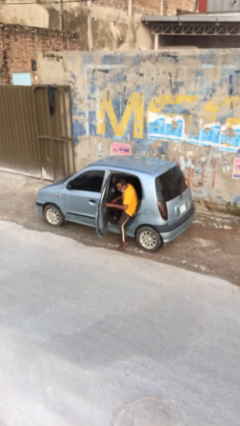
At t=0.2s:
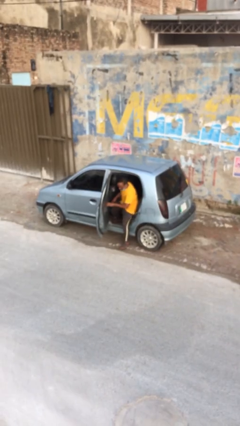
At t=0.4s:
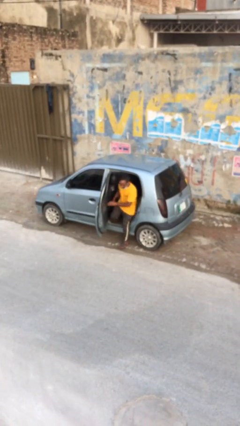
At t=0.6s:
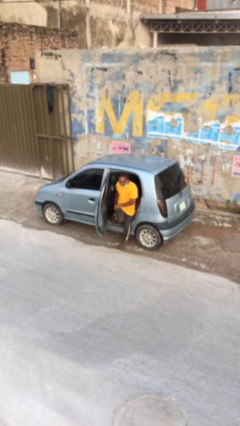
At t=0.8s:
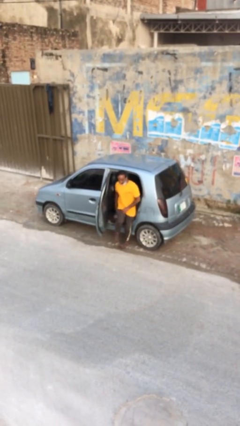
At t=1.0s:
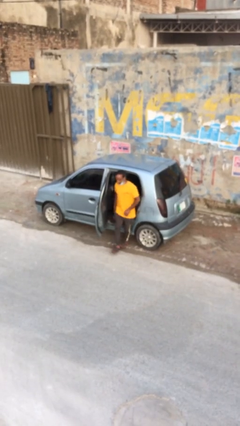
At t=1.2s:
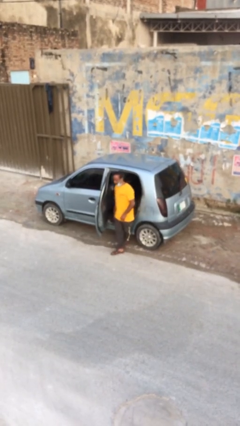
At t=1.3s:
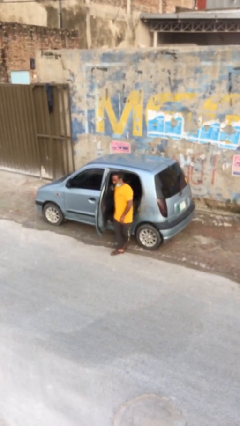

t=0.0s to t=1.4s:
person exits car

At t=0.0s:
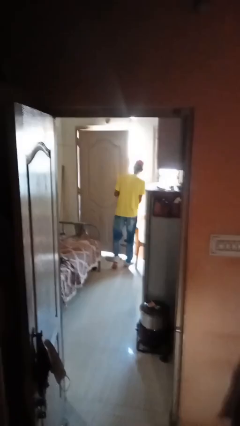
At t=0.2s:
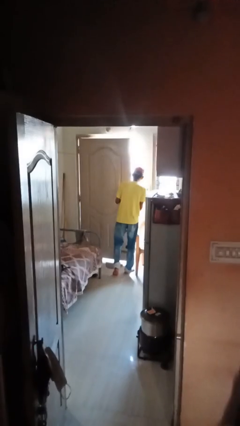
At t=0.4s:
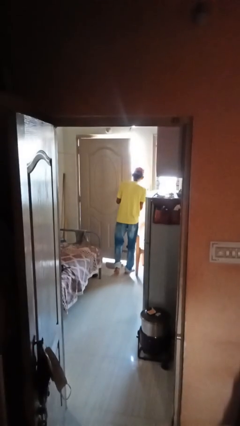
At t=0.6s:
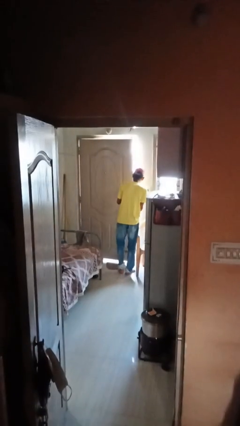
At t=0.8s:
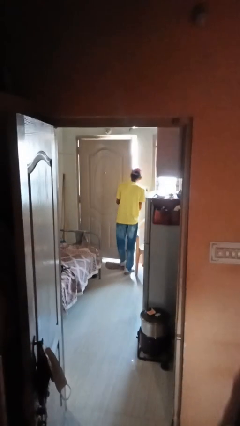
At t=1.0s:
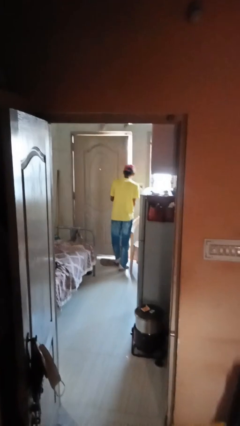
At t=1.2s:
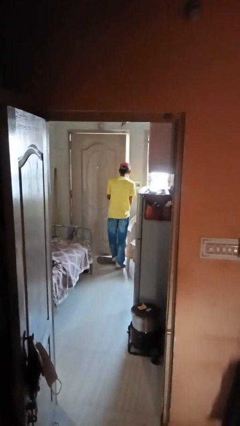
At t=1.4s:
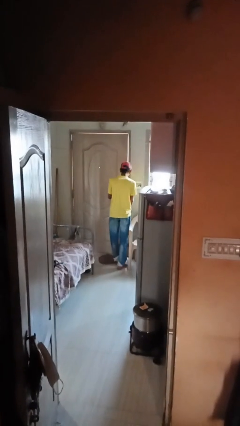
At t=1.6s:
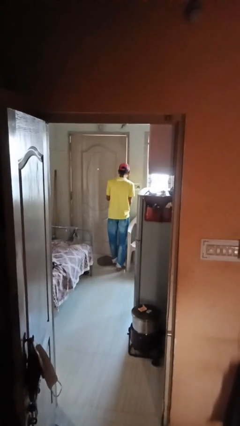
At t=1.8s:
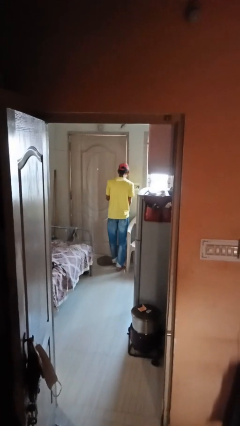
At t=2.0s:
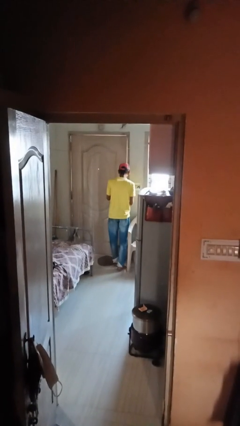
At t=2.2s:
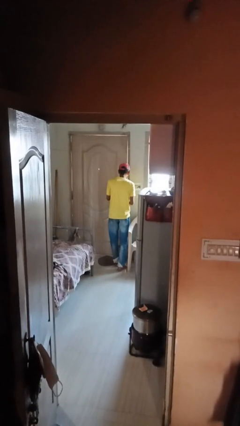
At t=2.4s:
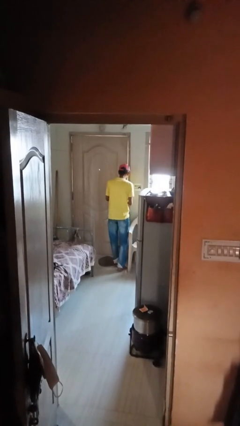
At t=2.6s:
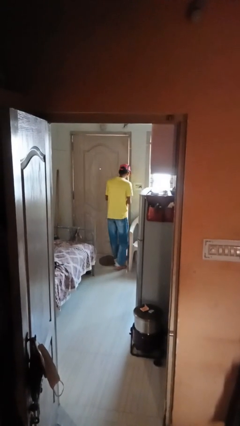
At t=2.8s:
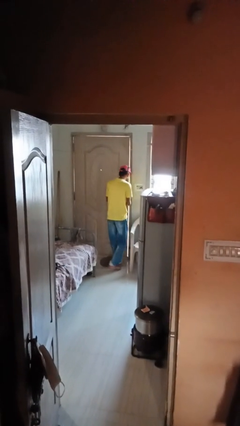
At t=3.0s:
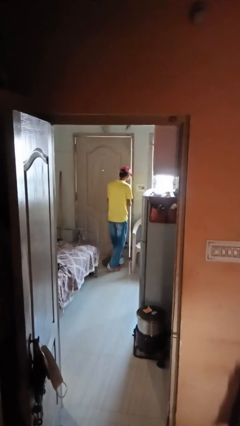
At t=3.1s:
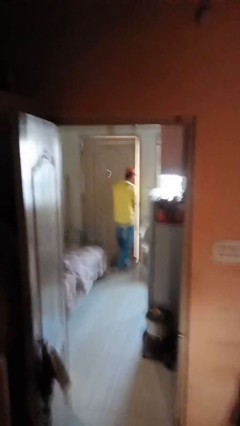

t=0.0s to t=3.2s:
person closes facility door

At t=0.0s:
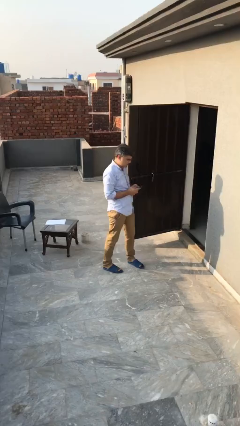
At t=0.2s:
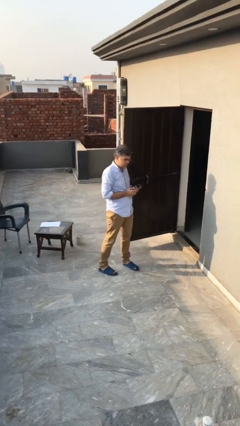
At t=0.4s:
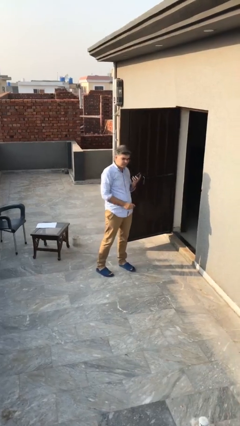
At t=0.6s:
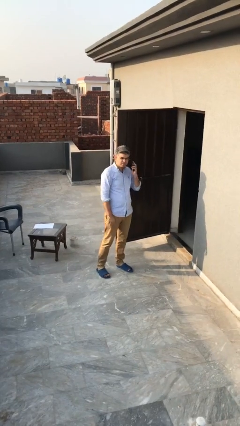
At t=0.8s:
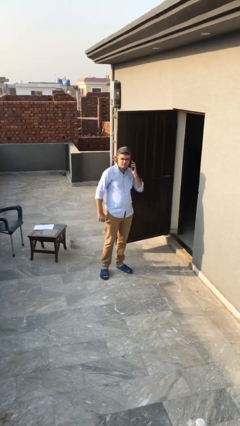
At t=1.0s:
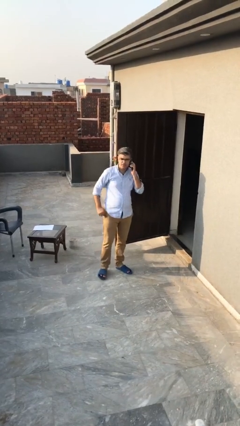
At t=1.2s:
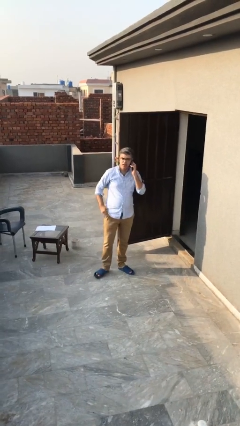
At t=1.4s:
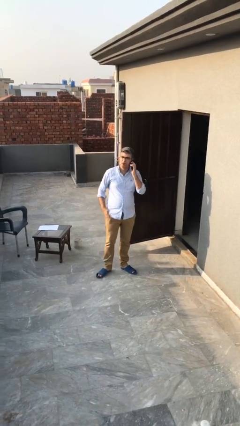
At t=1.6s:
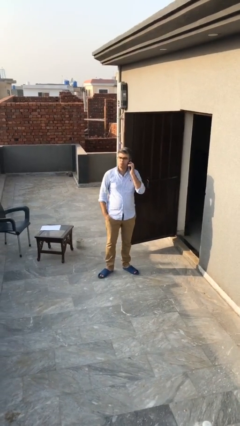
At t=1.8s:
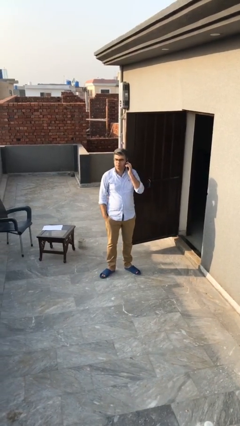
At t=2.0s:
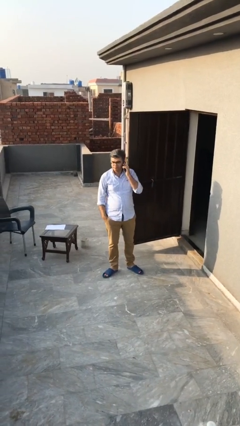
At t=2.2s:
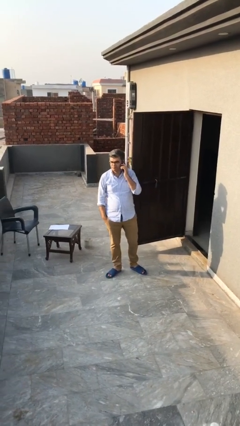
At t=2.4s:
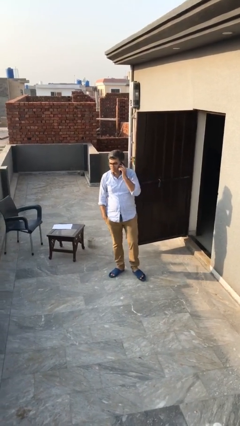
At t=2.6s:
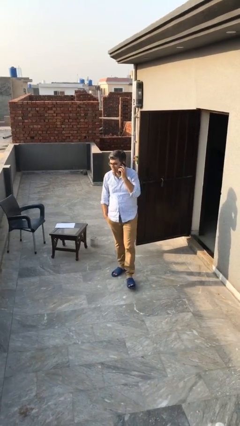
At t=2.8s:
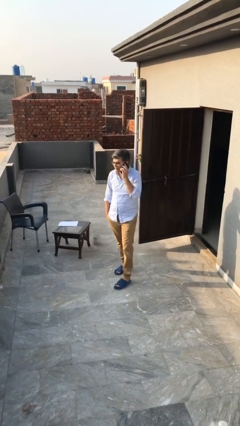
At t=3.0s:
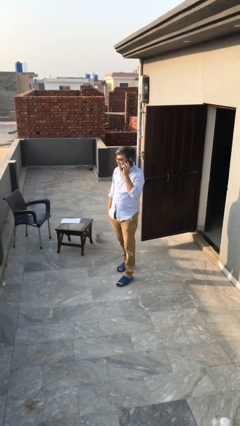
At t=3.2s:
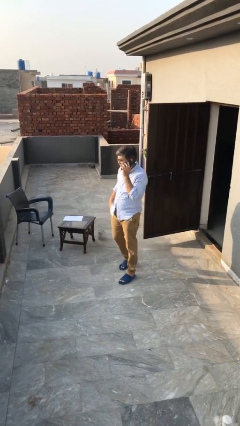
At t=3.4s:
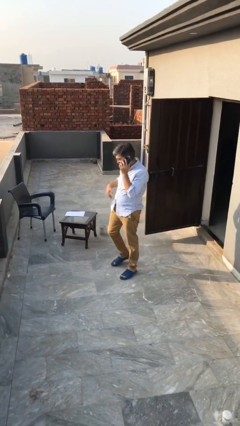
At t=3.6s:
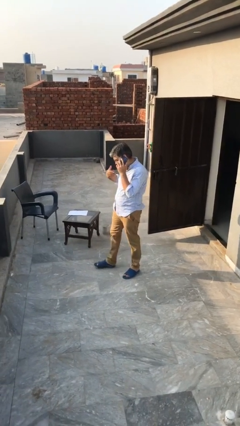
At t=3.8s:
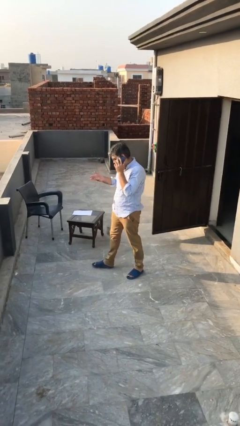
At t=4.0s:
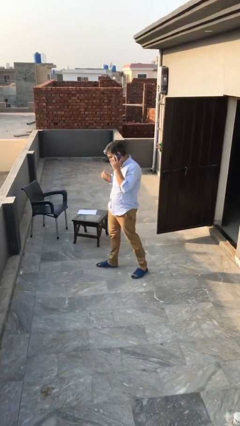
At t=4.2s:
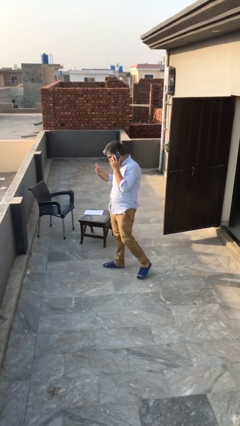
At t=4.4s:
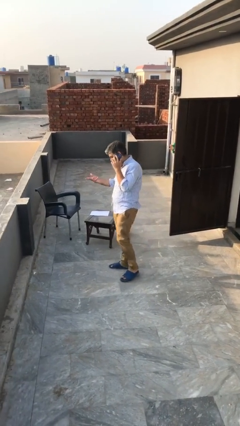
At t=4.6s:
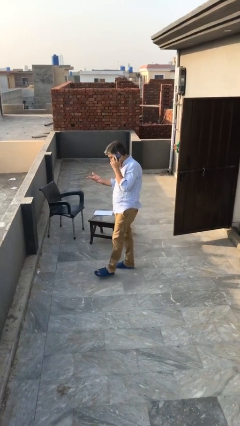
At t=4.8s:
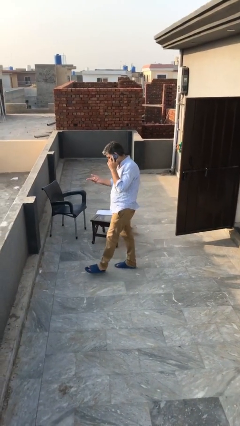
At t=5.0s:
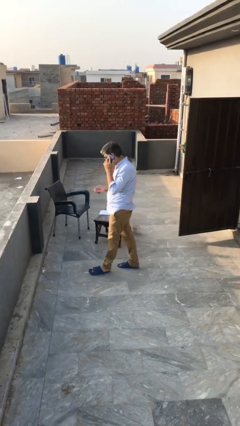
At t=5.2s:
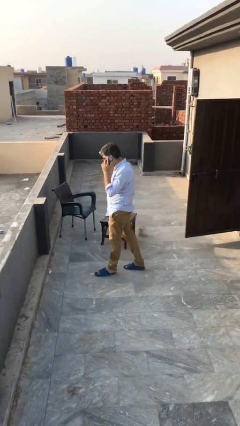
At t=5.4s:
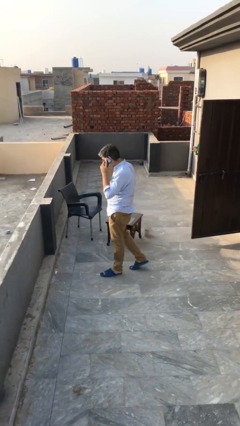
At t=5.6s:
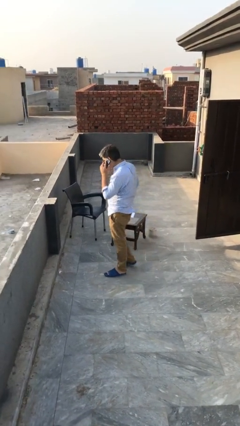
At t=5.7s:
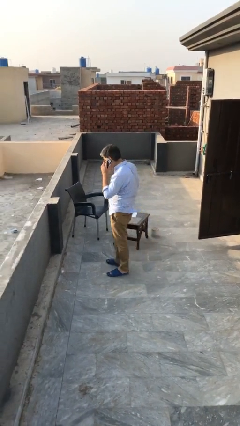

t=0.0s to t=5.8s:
person talks on phone

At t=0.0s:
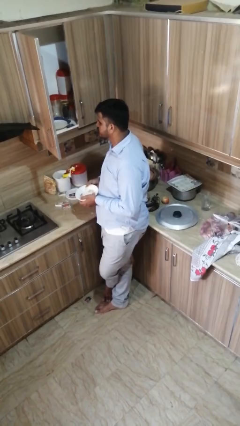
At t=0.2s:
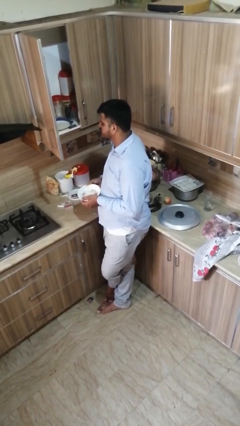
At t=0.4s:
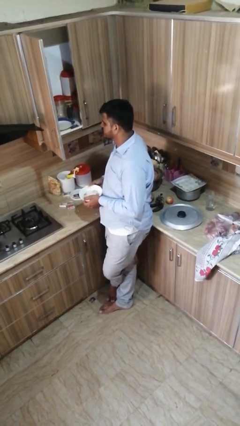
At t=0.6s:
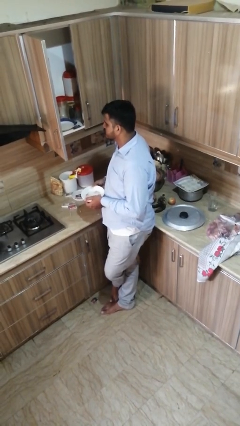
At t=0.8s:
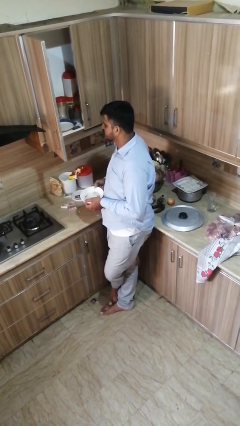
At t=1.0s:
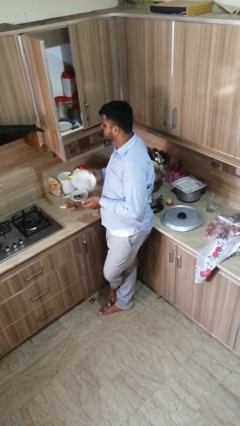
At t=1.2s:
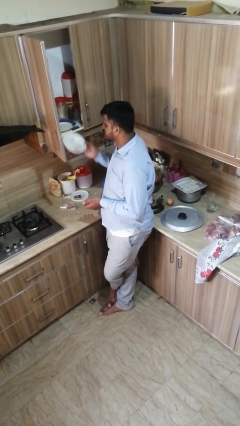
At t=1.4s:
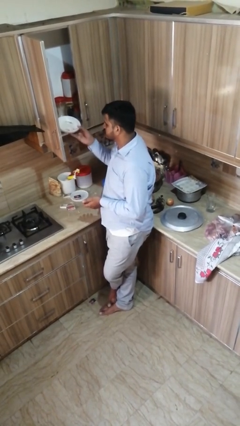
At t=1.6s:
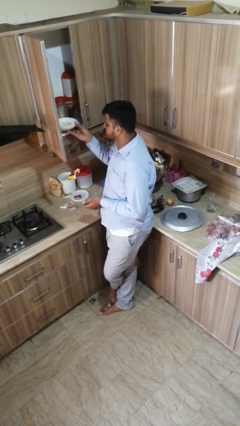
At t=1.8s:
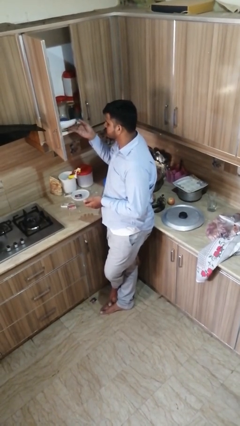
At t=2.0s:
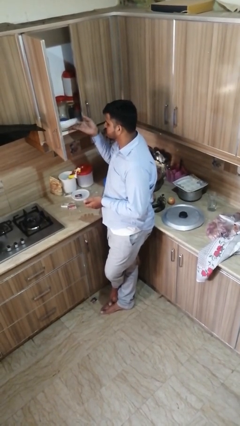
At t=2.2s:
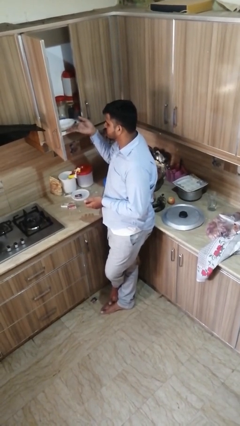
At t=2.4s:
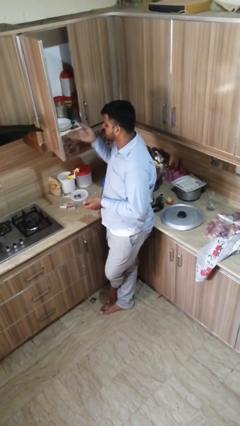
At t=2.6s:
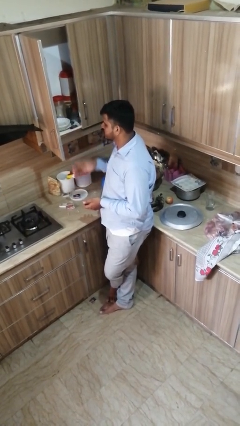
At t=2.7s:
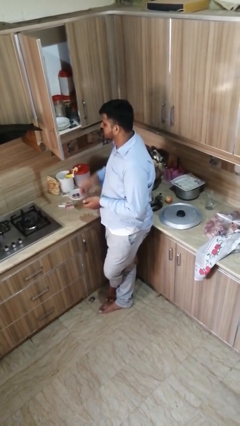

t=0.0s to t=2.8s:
person puts object in cabinet

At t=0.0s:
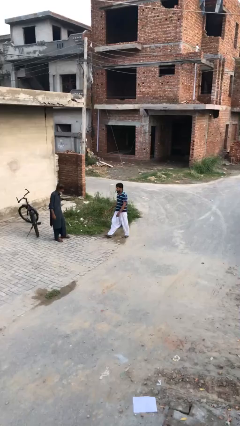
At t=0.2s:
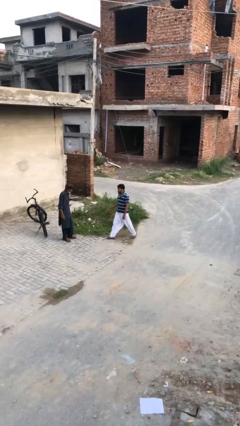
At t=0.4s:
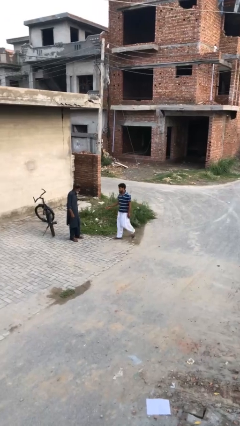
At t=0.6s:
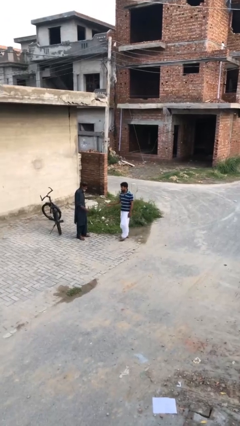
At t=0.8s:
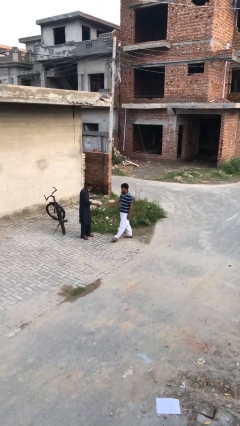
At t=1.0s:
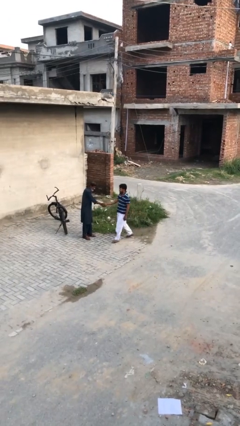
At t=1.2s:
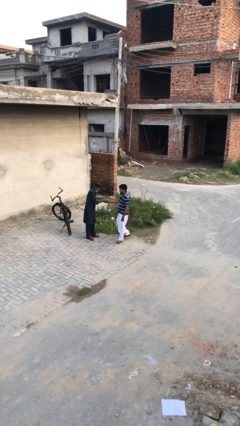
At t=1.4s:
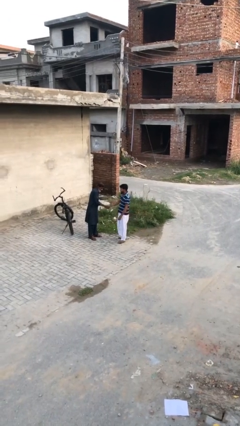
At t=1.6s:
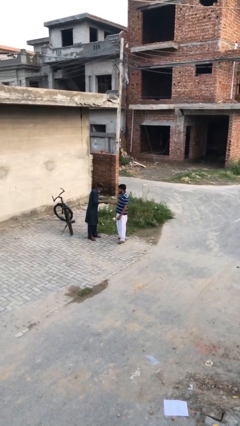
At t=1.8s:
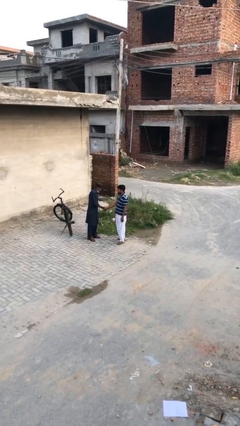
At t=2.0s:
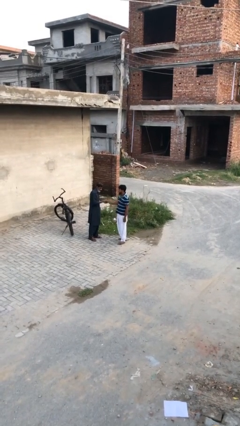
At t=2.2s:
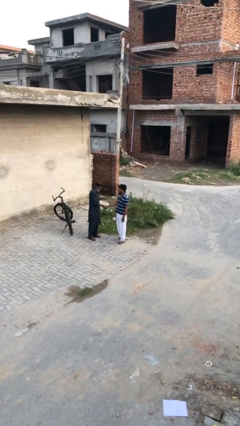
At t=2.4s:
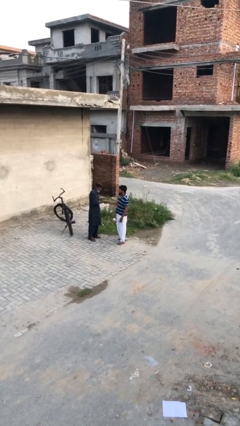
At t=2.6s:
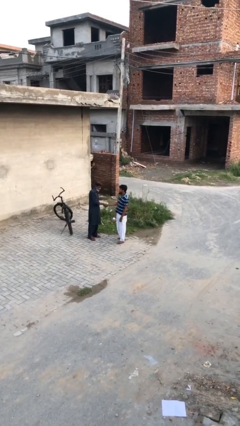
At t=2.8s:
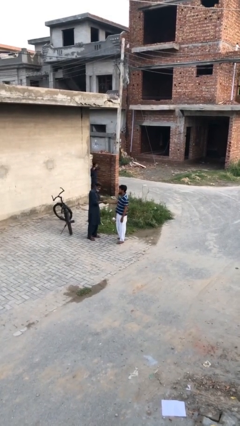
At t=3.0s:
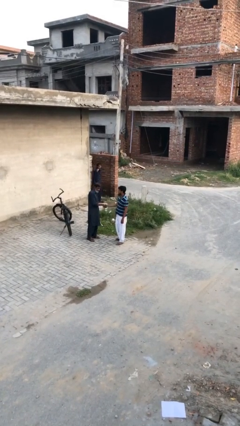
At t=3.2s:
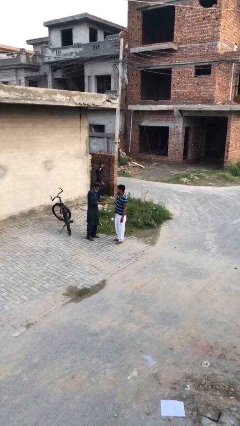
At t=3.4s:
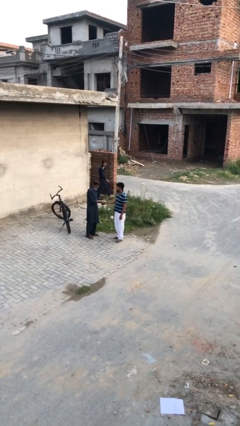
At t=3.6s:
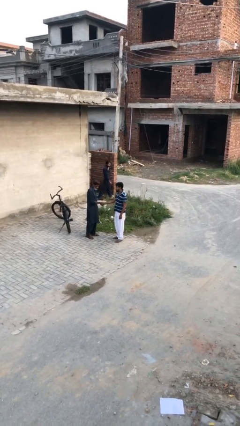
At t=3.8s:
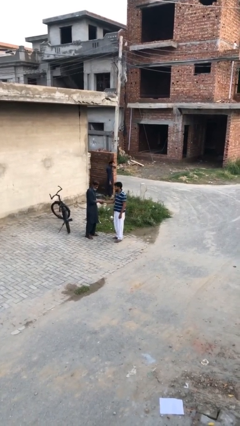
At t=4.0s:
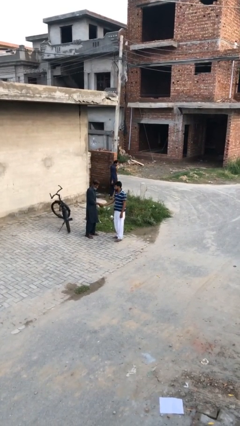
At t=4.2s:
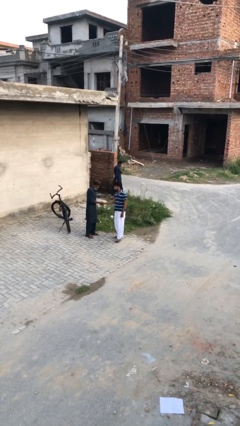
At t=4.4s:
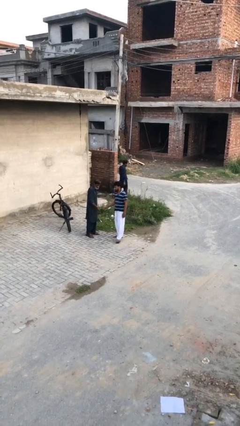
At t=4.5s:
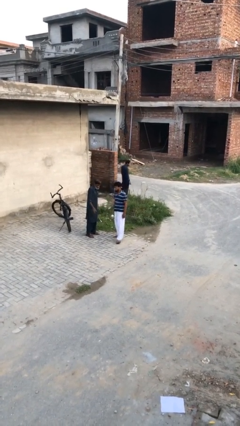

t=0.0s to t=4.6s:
person shakes hand
